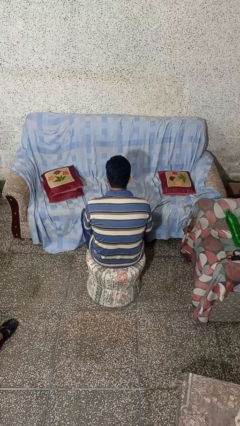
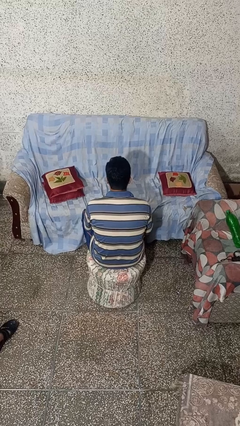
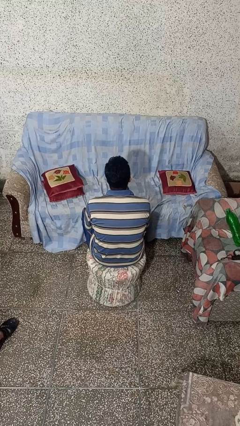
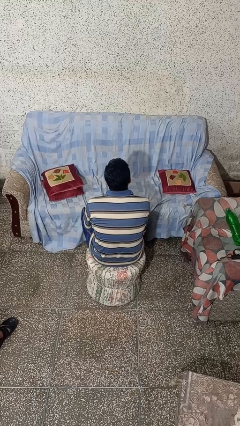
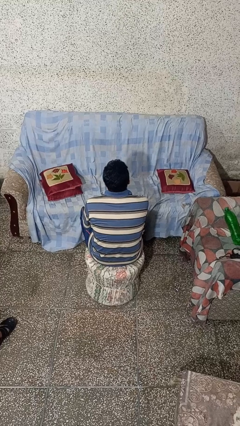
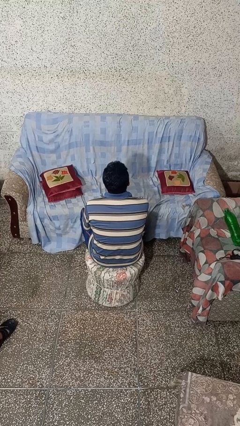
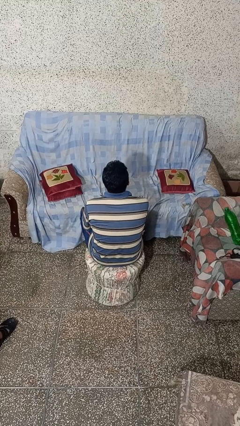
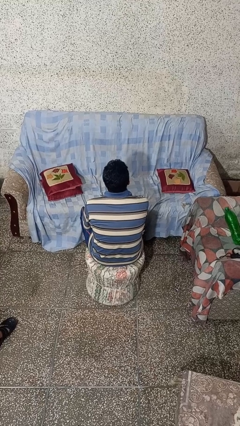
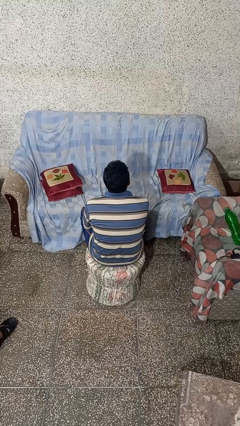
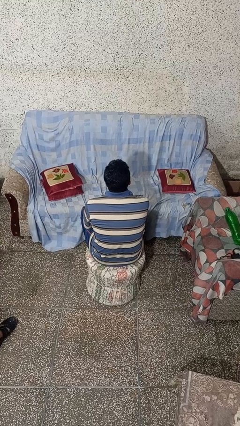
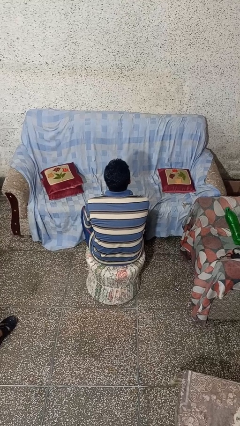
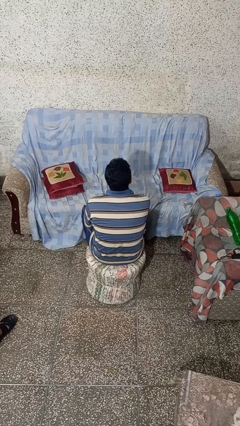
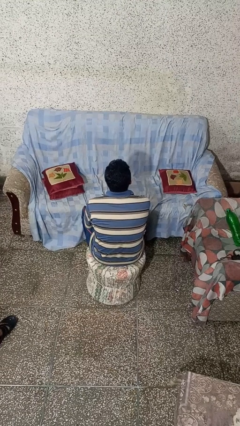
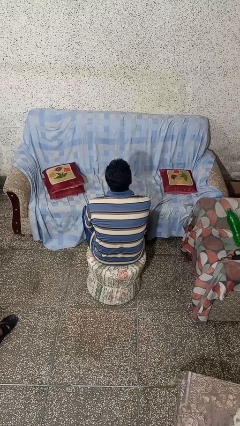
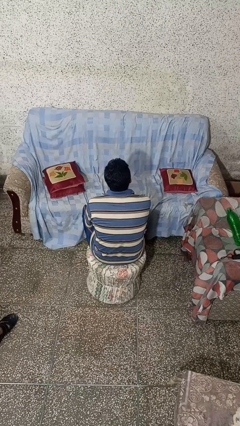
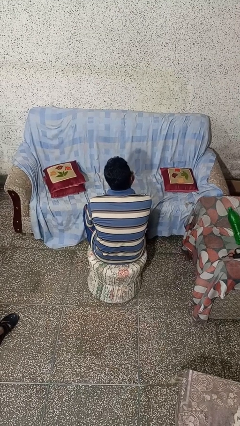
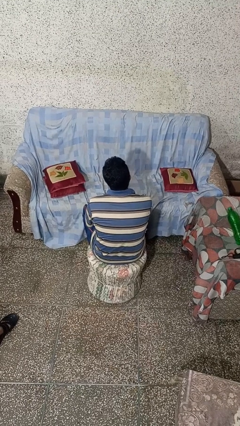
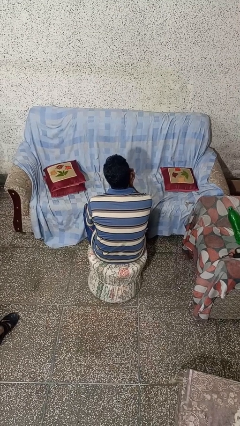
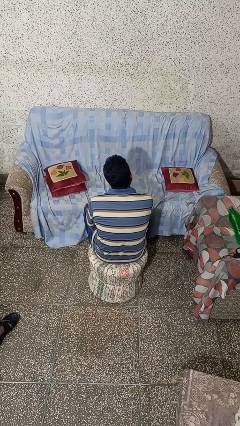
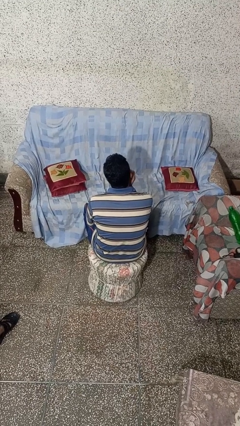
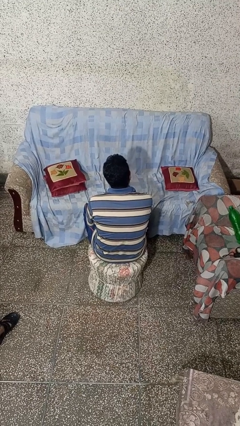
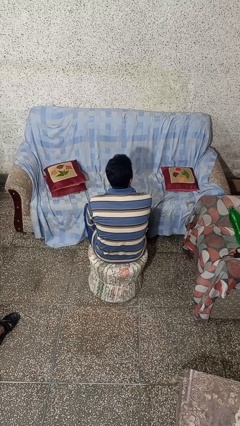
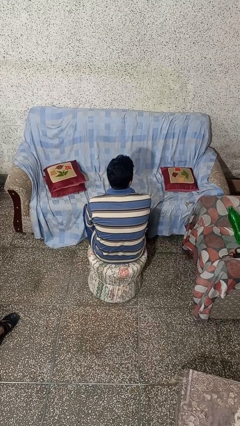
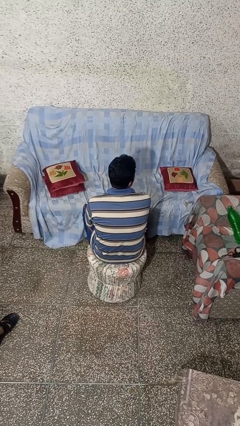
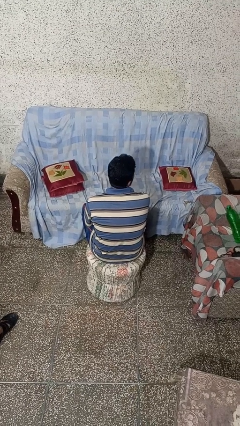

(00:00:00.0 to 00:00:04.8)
person strokes chin

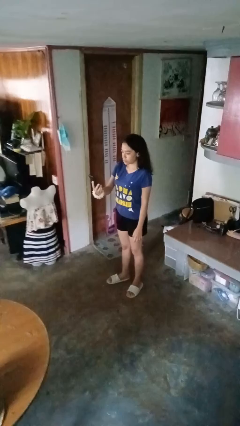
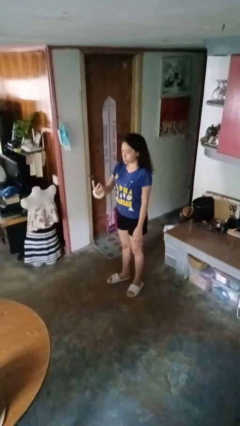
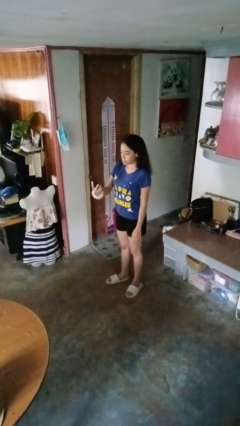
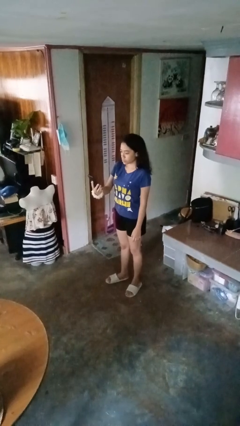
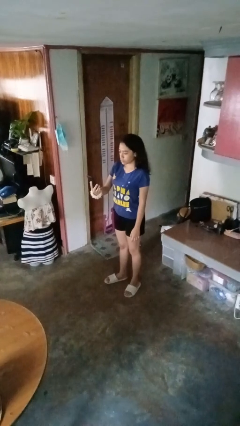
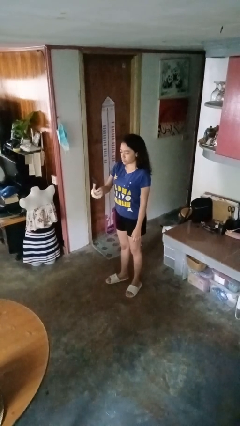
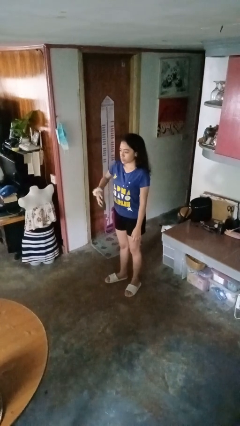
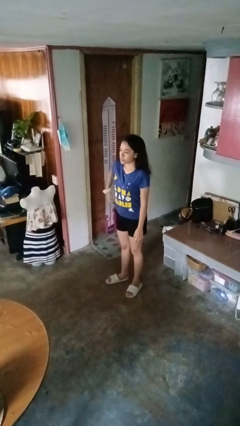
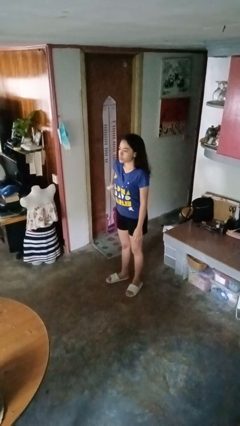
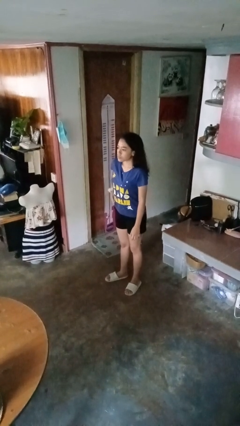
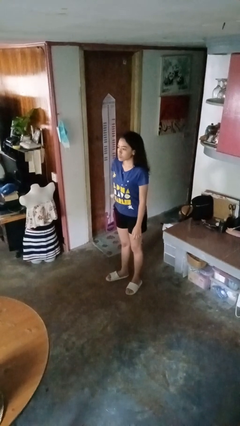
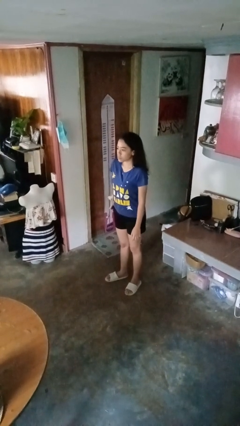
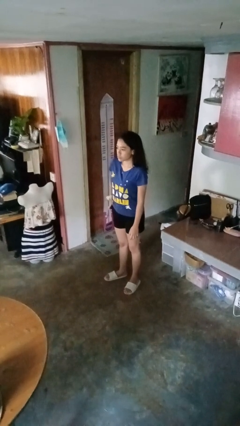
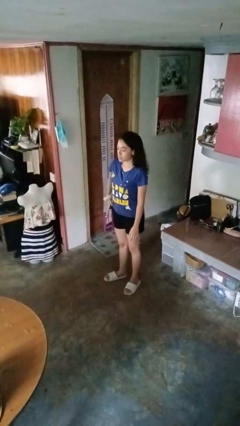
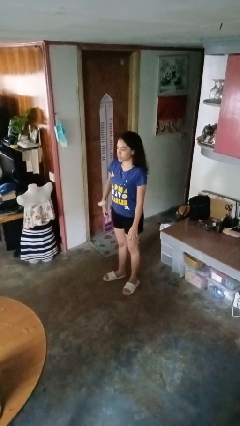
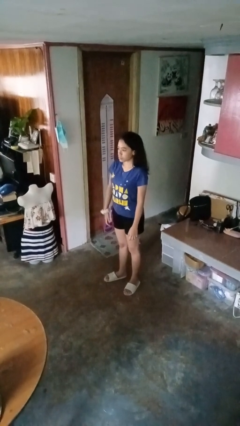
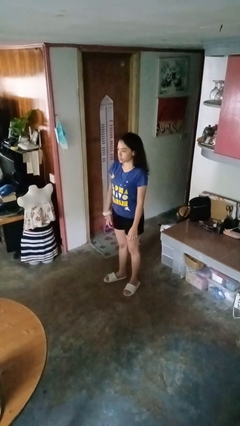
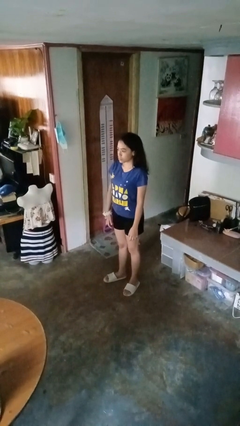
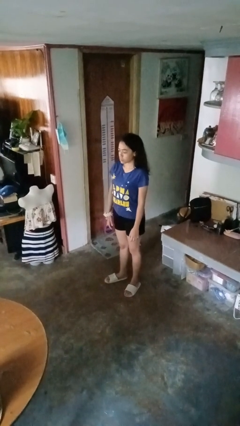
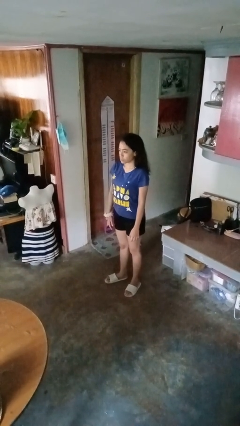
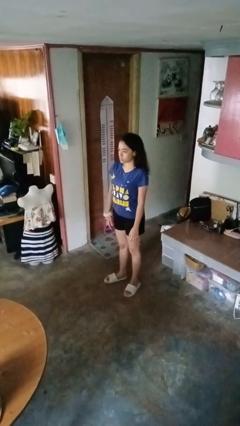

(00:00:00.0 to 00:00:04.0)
person puts phone into pocket

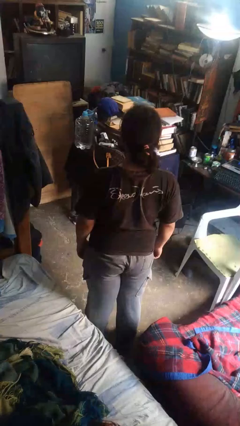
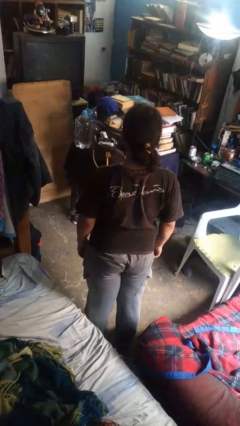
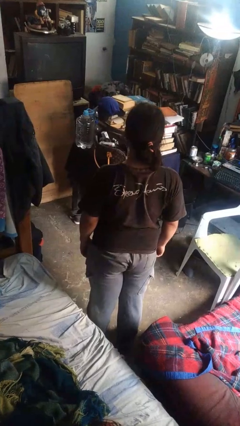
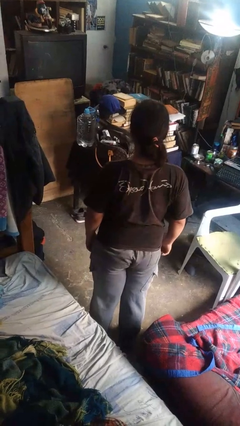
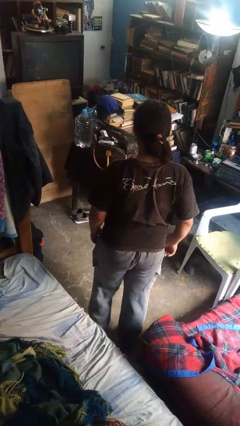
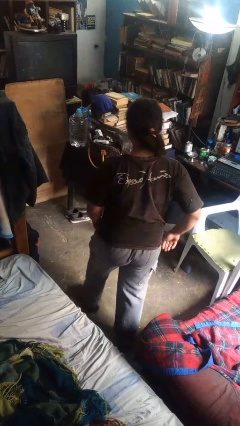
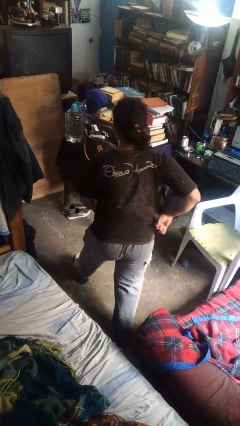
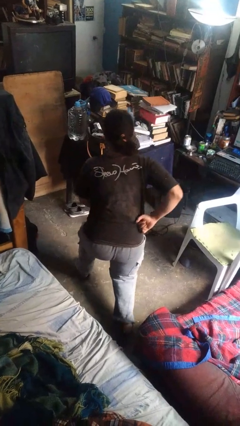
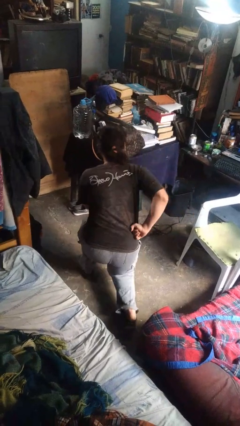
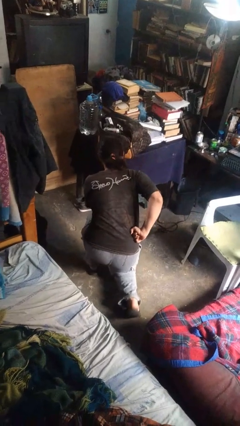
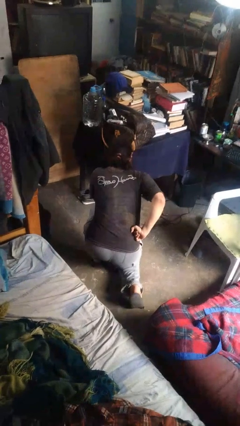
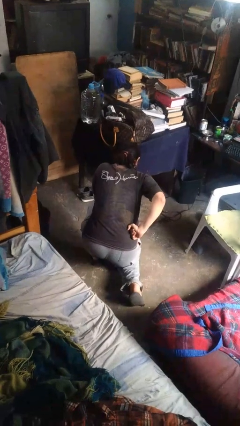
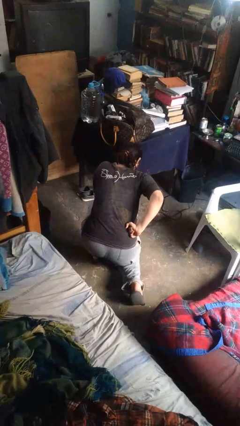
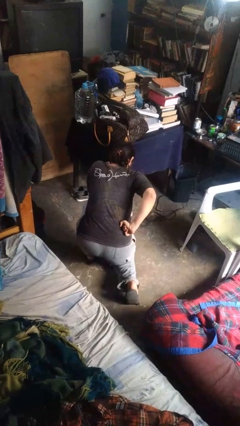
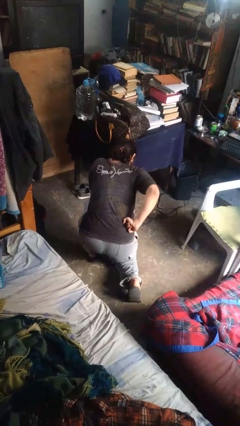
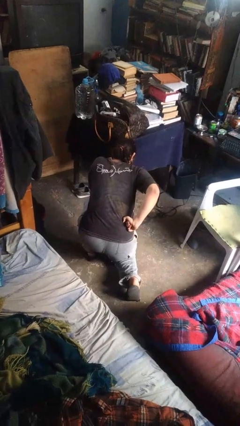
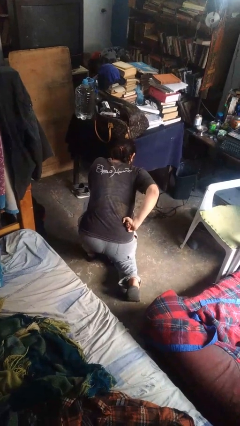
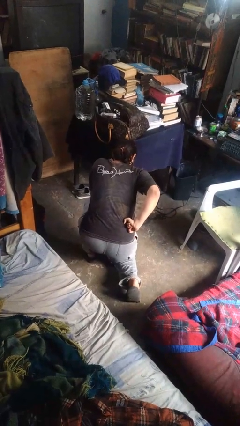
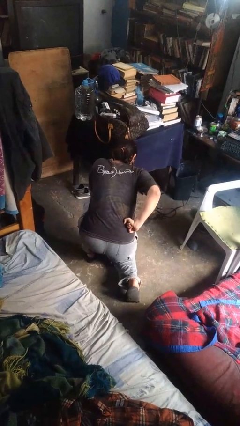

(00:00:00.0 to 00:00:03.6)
person kneels

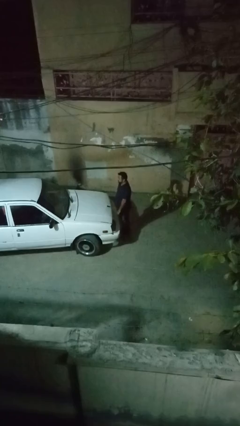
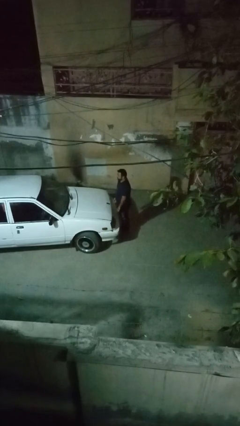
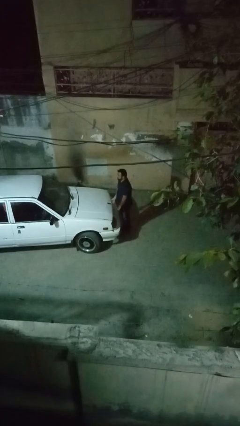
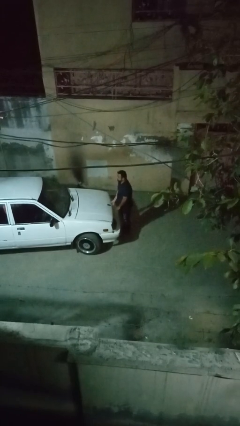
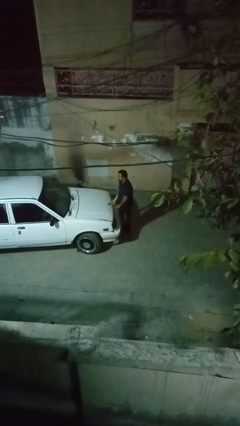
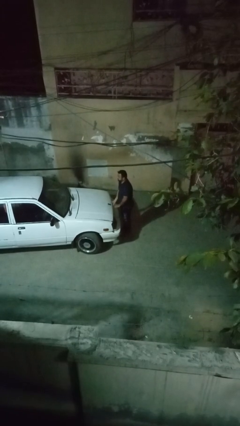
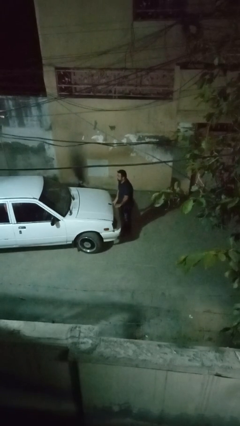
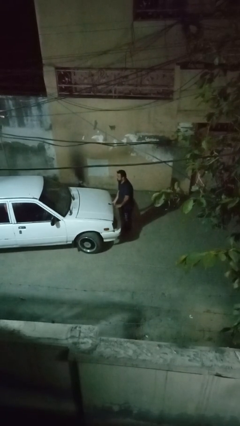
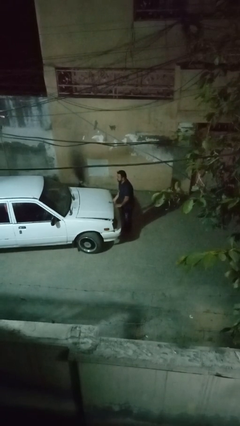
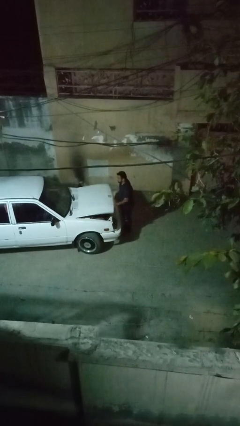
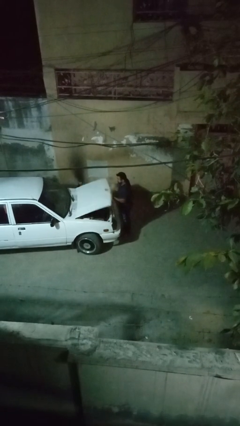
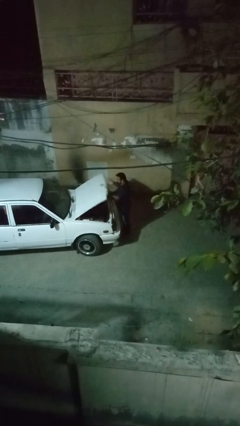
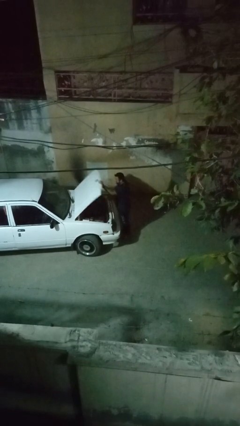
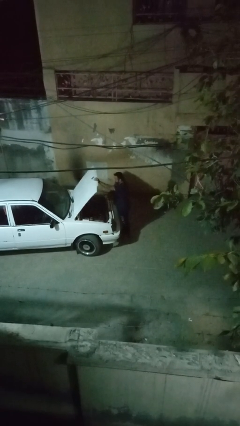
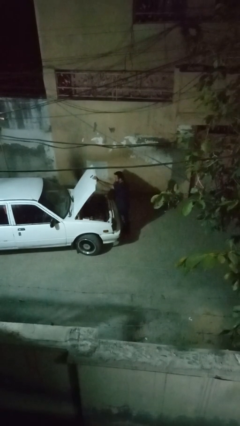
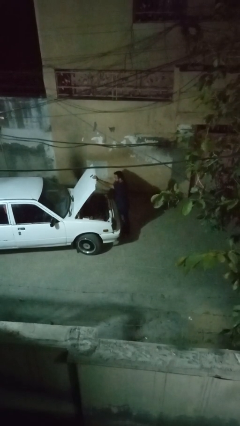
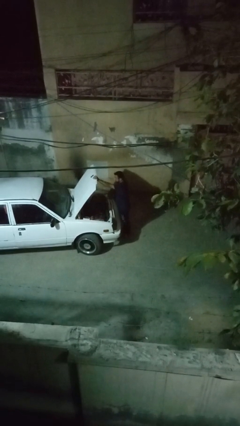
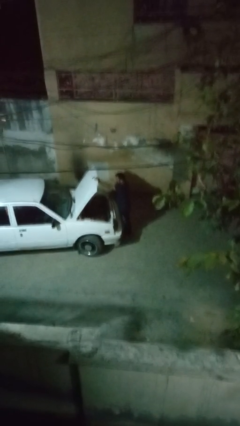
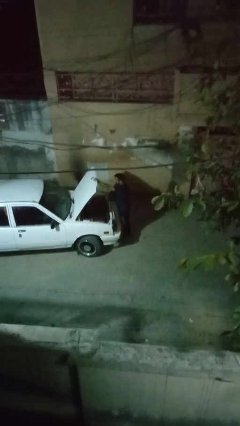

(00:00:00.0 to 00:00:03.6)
person opens car hood

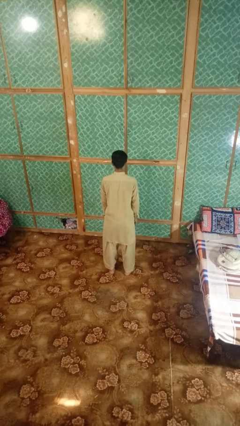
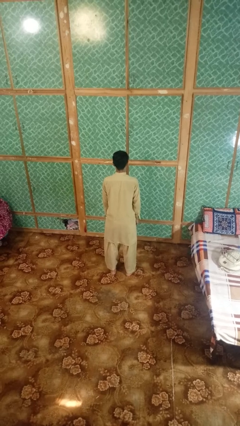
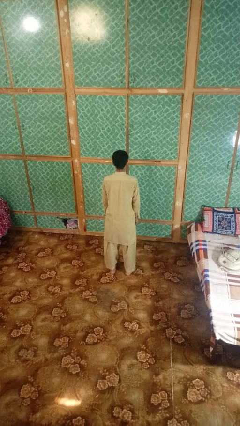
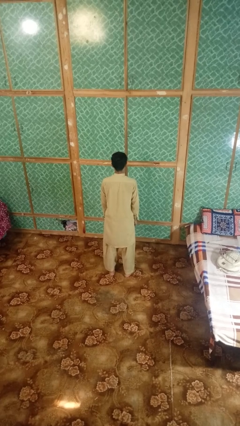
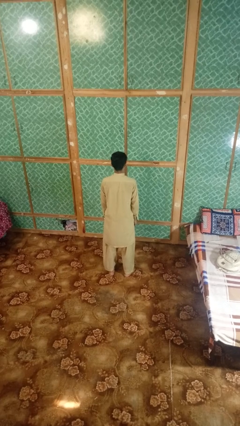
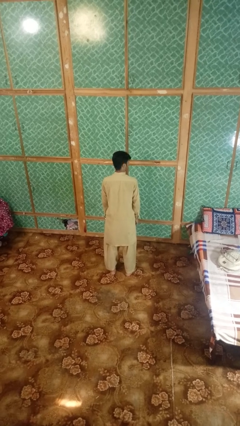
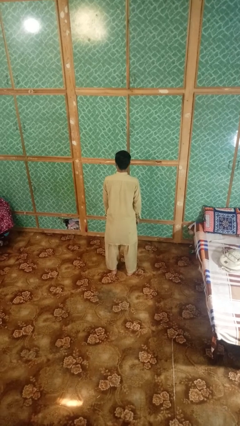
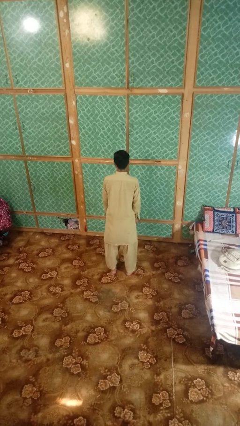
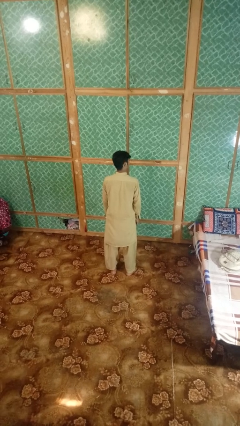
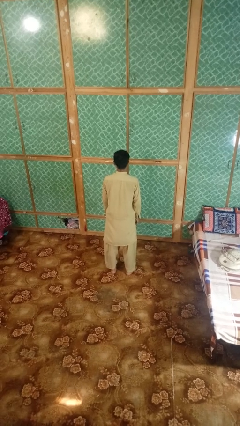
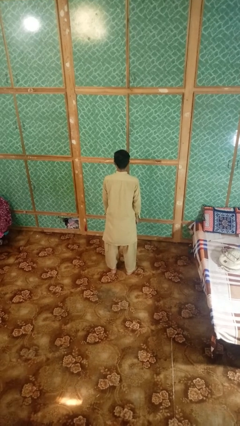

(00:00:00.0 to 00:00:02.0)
person nods head
